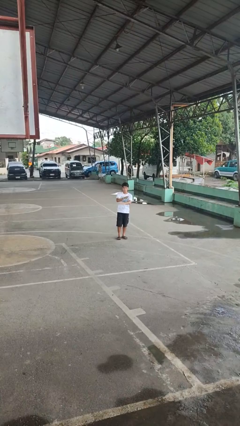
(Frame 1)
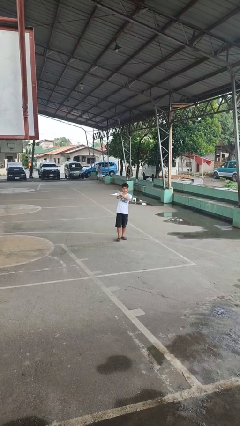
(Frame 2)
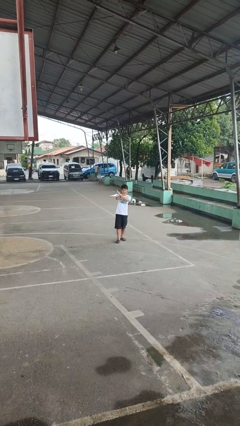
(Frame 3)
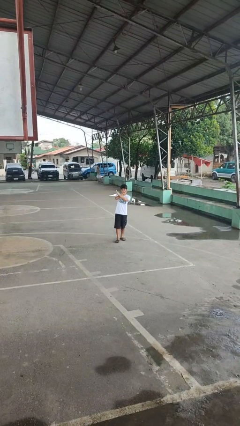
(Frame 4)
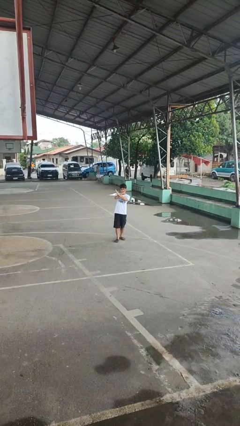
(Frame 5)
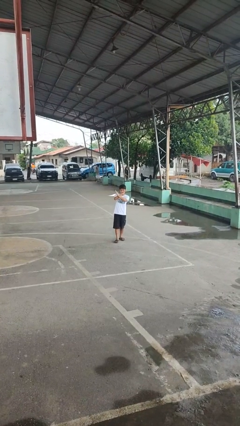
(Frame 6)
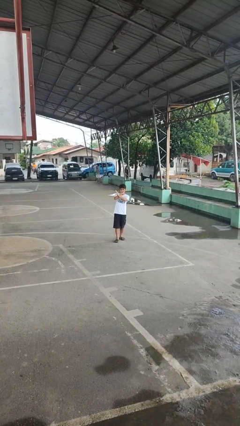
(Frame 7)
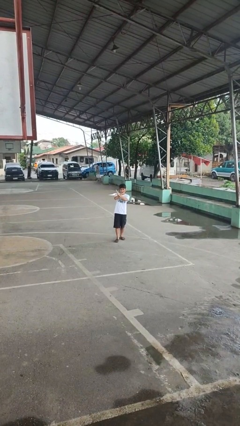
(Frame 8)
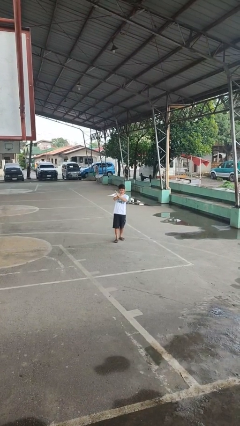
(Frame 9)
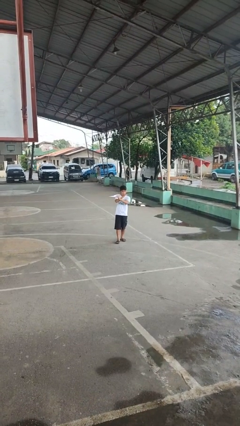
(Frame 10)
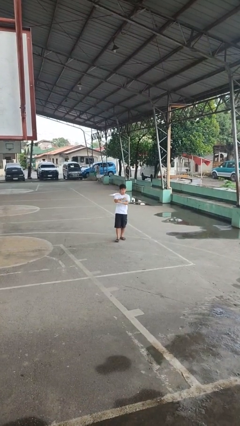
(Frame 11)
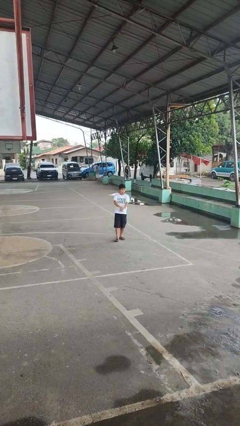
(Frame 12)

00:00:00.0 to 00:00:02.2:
person gestures arms x

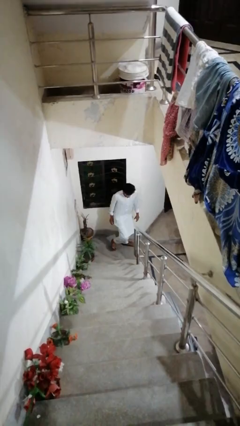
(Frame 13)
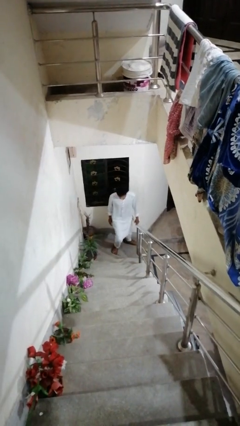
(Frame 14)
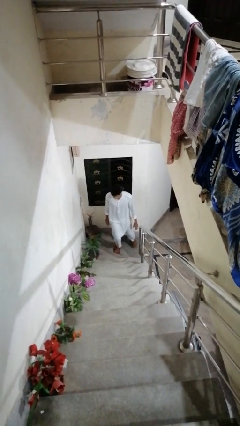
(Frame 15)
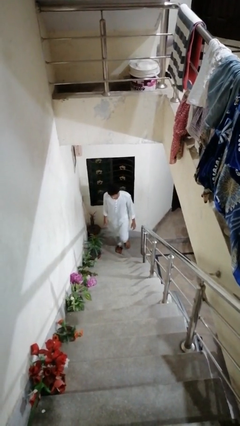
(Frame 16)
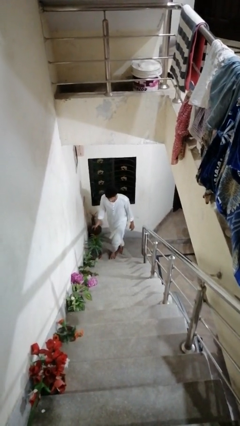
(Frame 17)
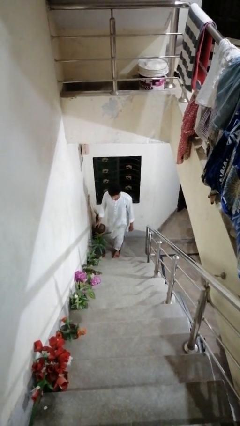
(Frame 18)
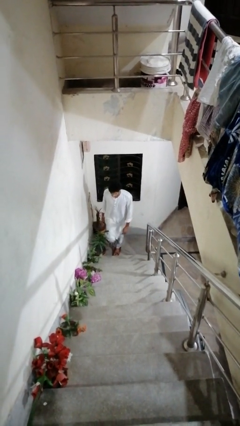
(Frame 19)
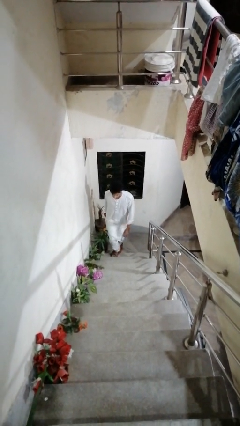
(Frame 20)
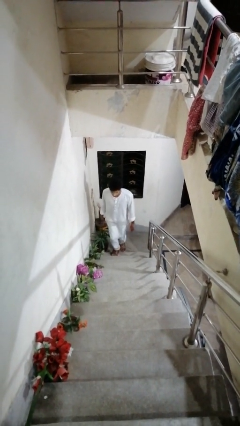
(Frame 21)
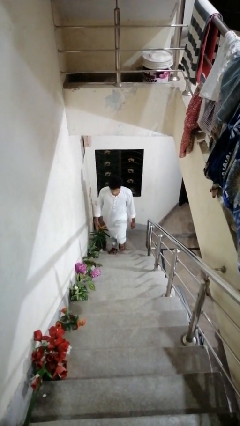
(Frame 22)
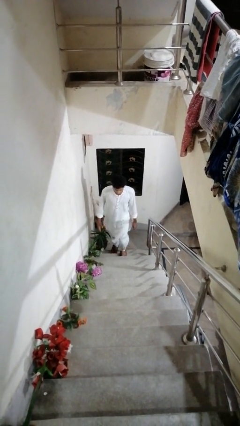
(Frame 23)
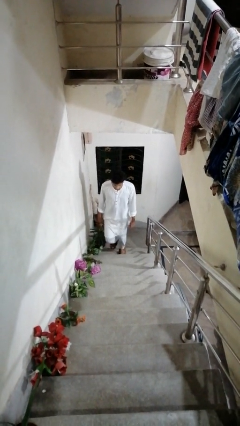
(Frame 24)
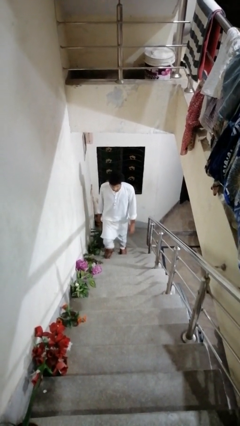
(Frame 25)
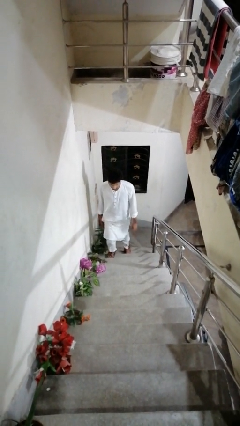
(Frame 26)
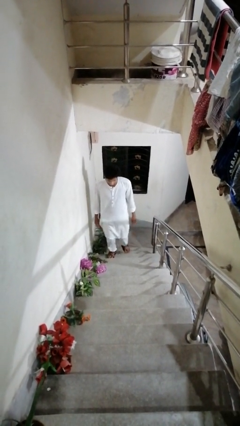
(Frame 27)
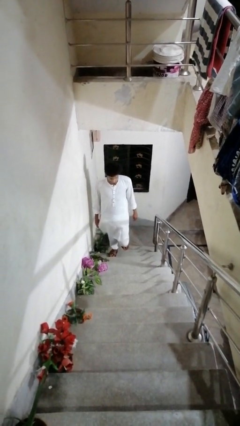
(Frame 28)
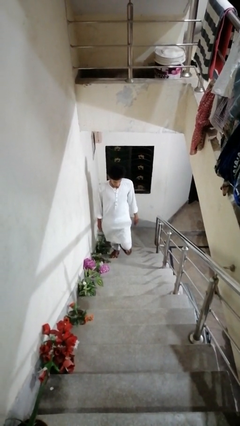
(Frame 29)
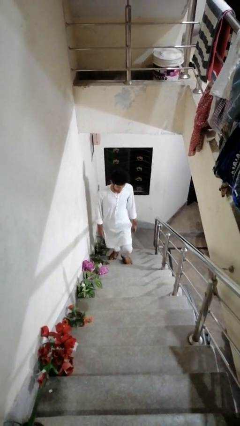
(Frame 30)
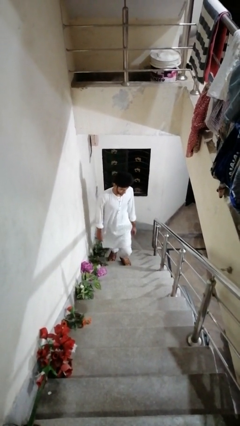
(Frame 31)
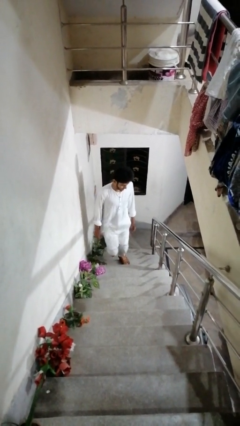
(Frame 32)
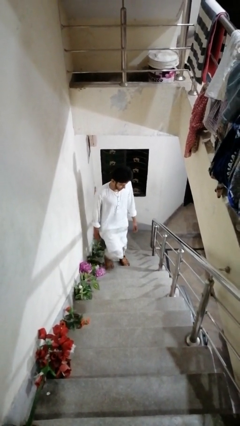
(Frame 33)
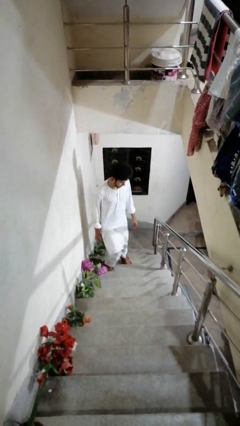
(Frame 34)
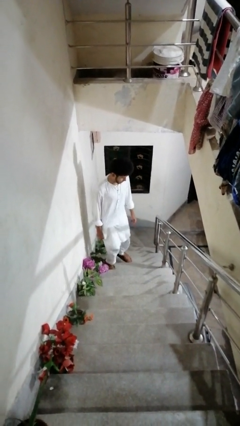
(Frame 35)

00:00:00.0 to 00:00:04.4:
person climbs up stairs

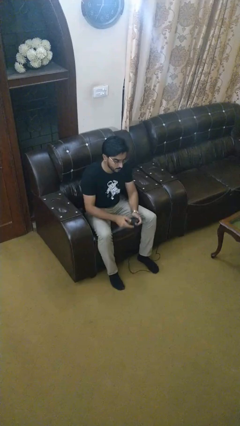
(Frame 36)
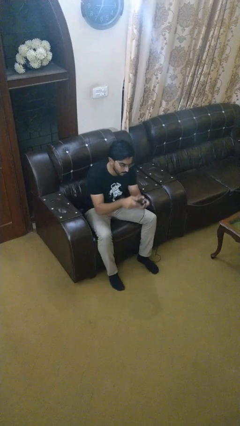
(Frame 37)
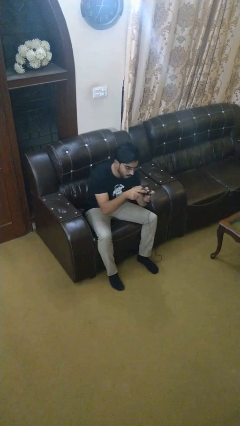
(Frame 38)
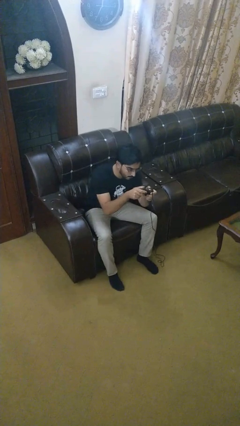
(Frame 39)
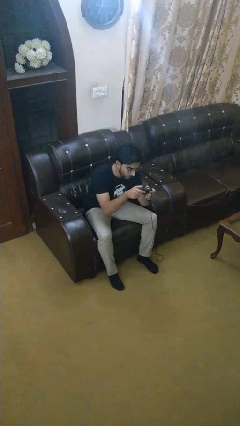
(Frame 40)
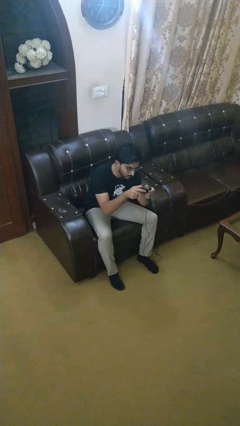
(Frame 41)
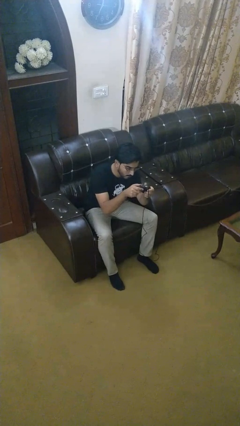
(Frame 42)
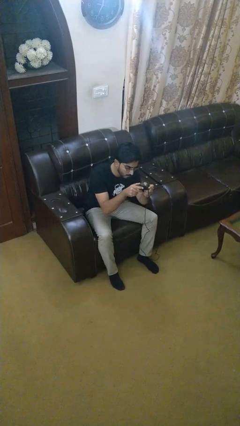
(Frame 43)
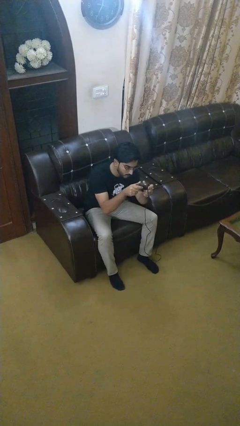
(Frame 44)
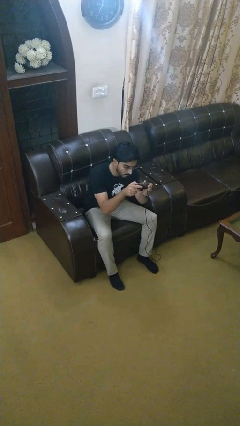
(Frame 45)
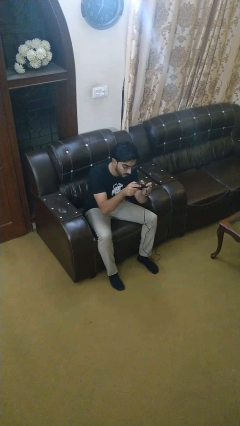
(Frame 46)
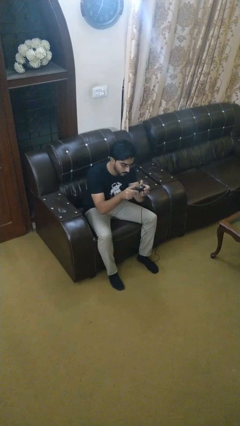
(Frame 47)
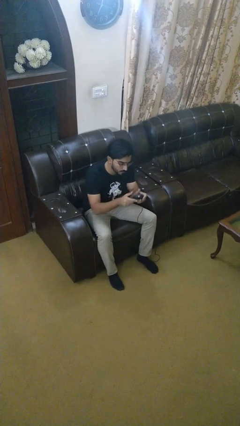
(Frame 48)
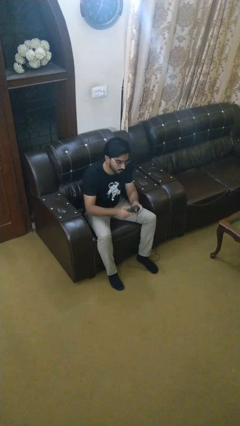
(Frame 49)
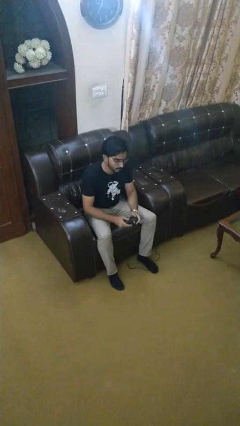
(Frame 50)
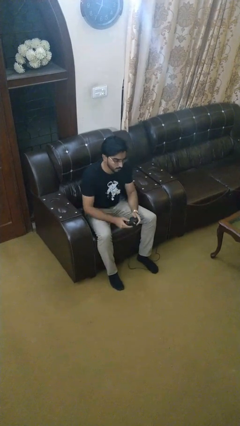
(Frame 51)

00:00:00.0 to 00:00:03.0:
person interacts with handheld game

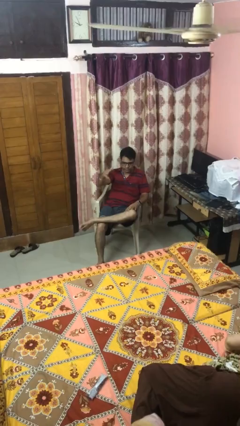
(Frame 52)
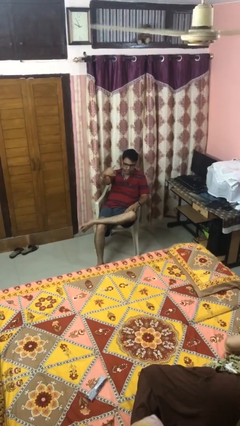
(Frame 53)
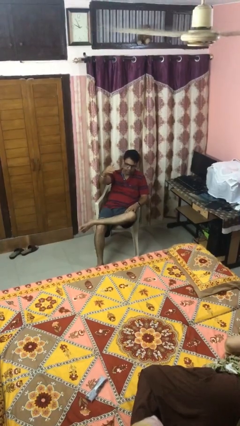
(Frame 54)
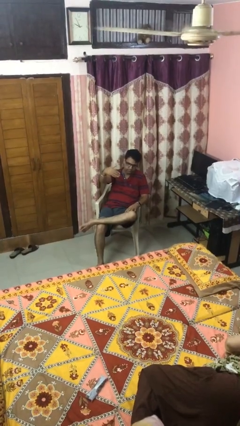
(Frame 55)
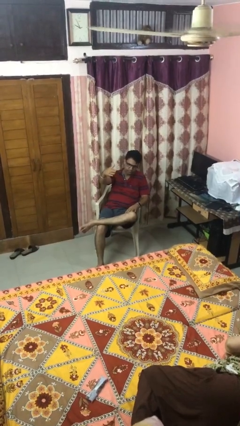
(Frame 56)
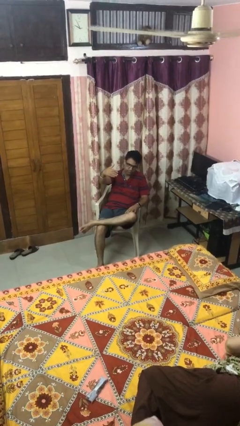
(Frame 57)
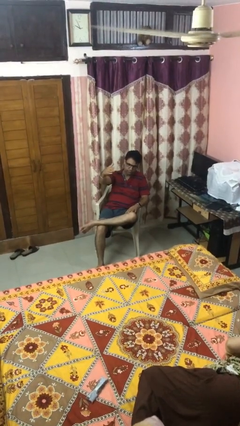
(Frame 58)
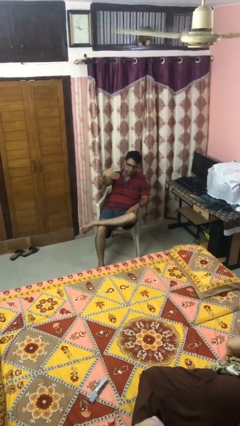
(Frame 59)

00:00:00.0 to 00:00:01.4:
person gestures come here

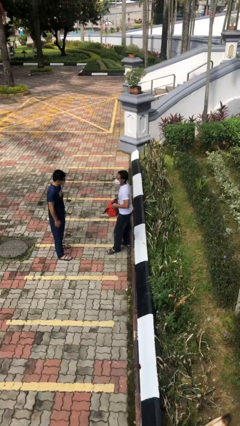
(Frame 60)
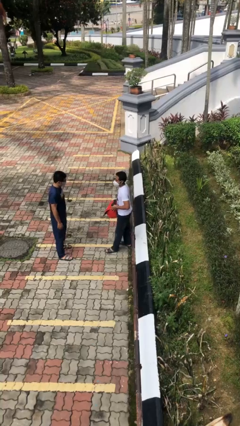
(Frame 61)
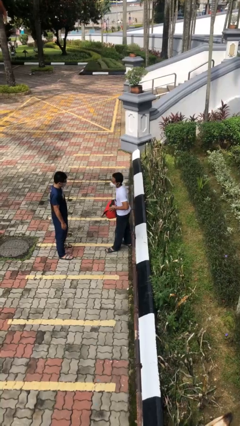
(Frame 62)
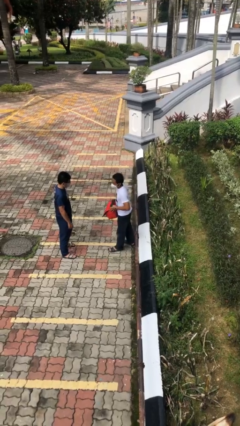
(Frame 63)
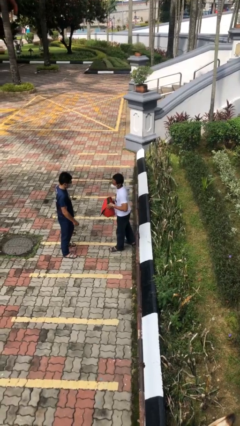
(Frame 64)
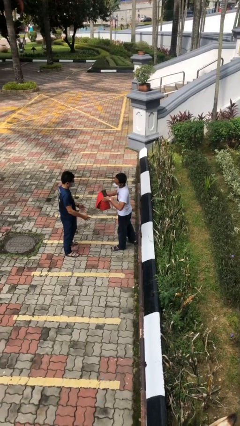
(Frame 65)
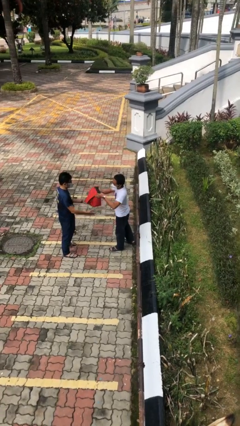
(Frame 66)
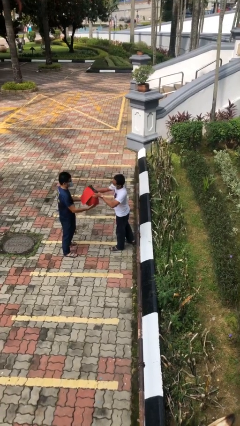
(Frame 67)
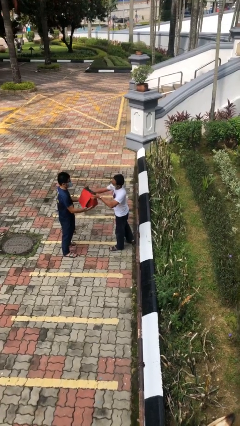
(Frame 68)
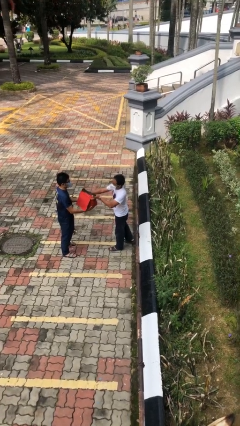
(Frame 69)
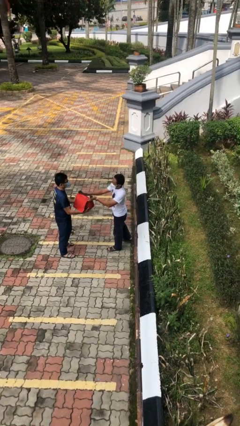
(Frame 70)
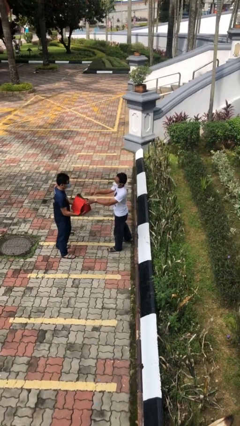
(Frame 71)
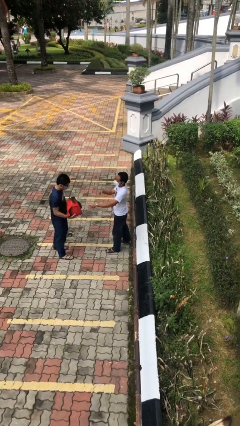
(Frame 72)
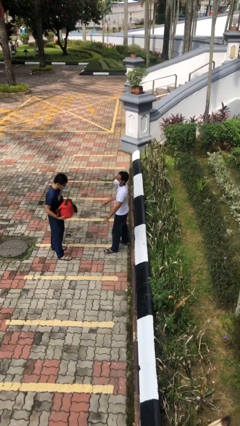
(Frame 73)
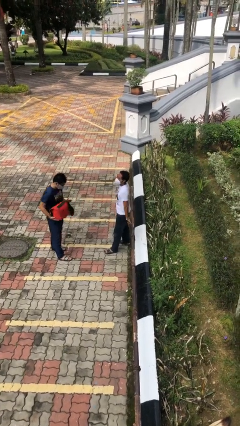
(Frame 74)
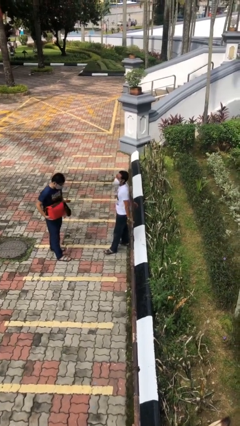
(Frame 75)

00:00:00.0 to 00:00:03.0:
person transfers object to person

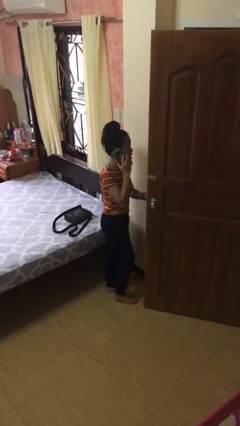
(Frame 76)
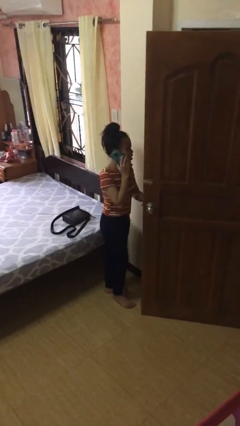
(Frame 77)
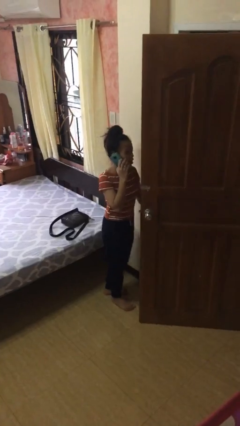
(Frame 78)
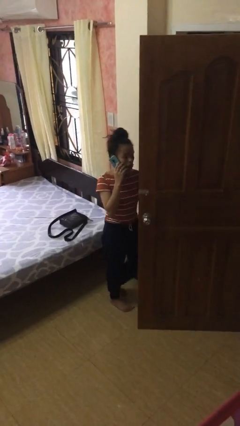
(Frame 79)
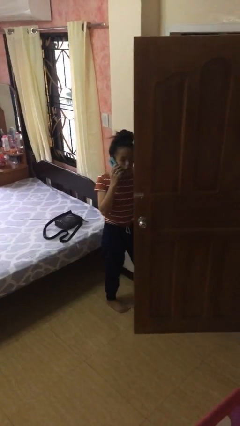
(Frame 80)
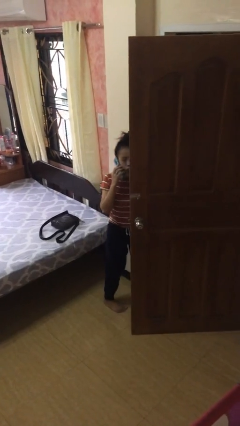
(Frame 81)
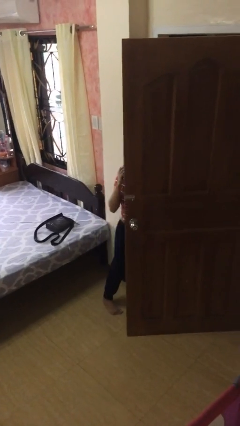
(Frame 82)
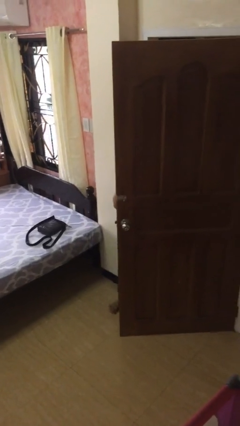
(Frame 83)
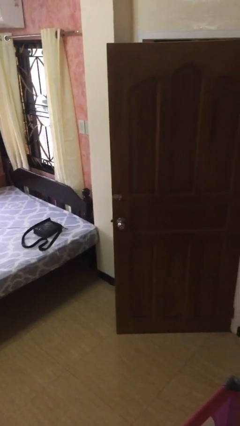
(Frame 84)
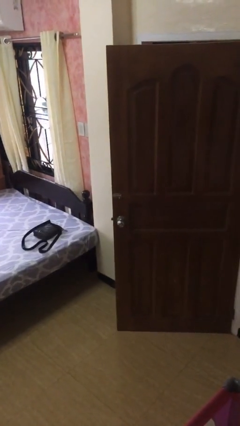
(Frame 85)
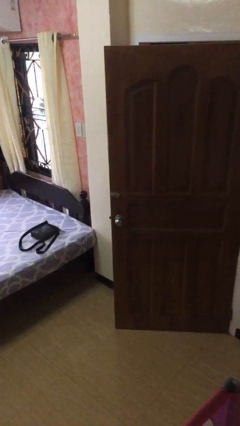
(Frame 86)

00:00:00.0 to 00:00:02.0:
person exits scene through structure

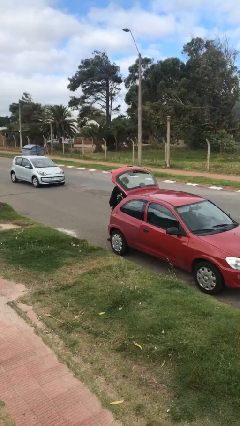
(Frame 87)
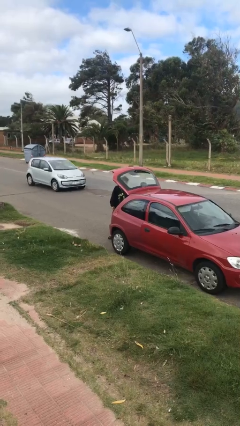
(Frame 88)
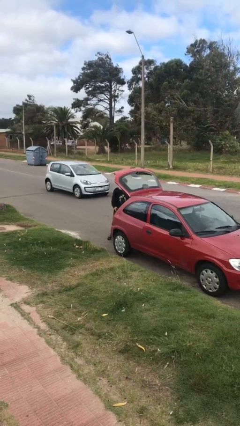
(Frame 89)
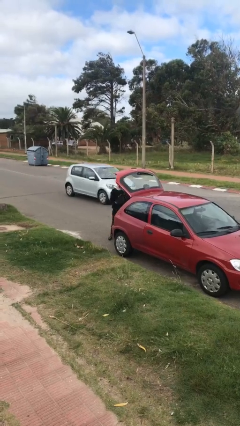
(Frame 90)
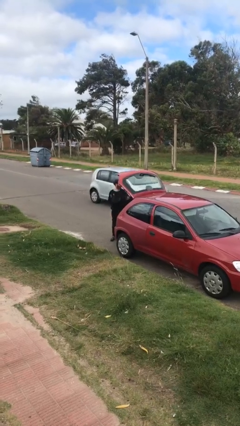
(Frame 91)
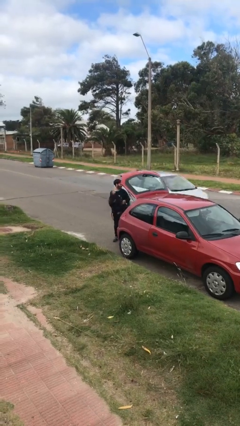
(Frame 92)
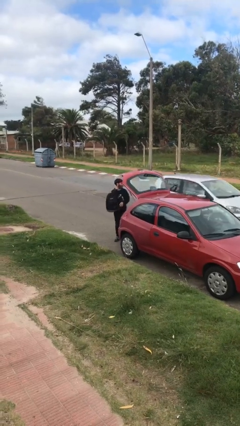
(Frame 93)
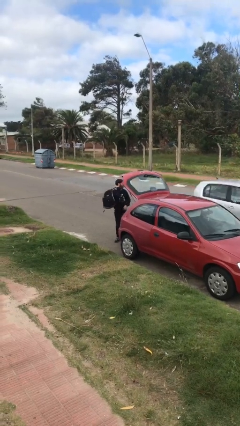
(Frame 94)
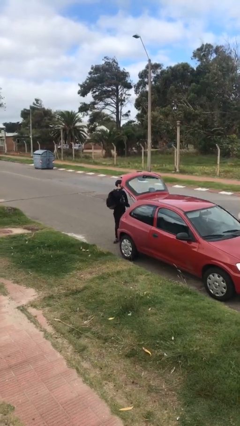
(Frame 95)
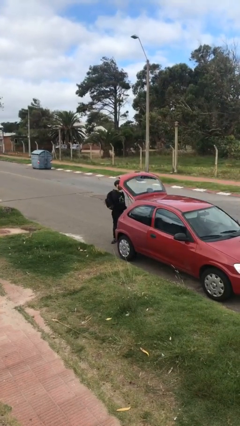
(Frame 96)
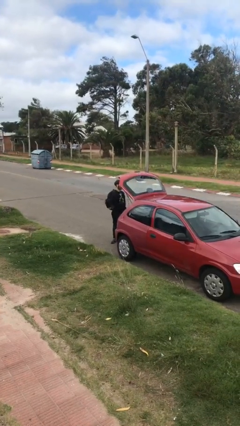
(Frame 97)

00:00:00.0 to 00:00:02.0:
person unloads car
